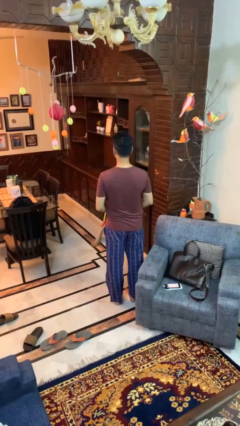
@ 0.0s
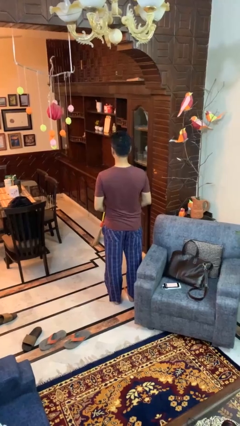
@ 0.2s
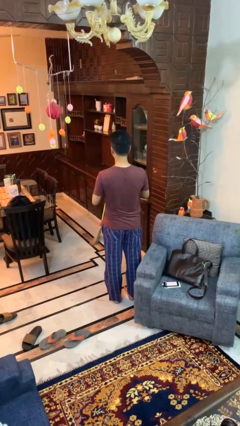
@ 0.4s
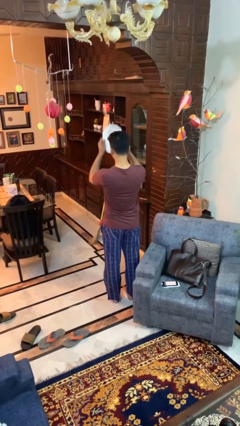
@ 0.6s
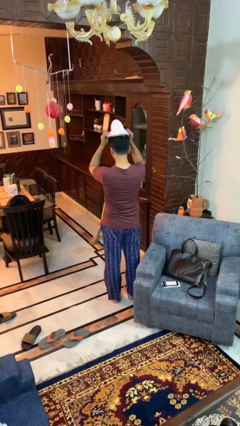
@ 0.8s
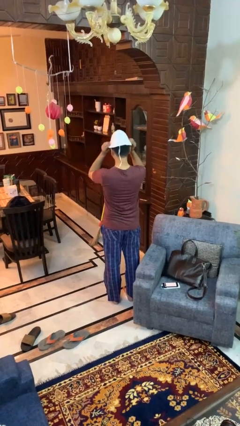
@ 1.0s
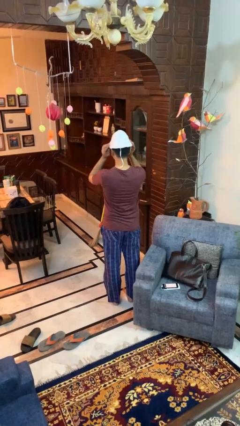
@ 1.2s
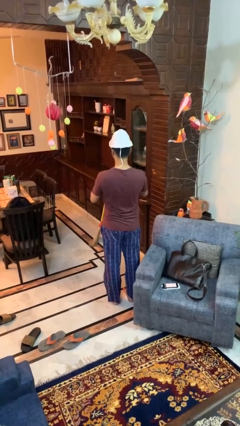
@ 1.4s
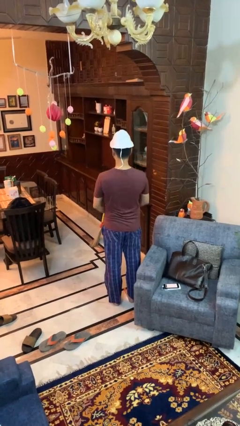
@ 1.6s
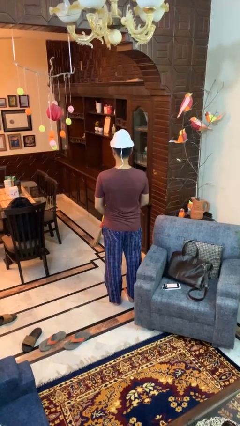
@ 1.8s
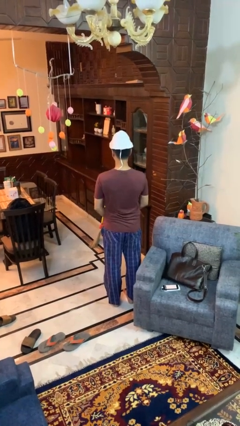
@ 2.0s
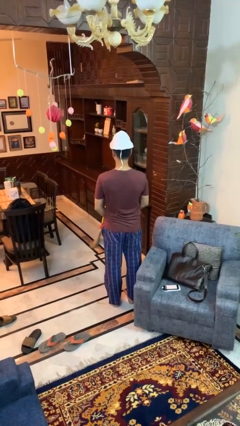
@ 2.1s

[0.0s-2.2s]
person puts on hat

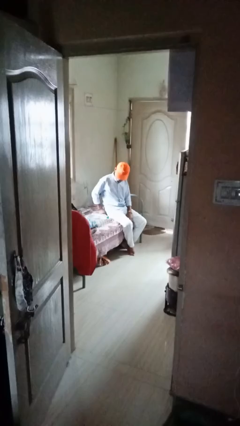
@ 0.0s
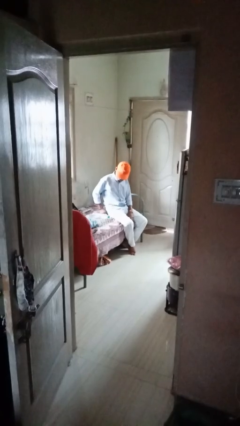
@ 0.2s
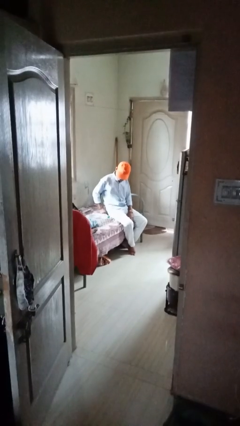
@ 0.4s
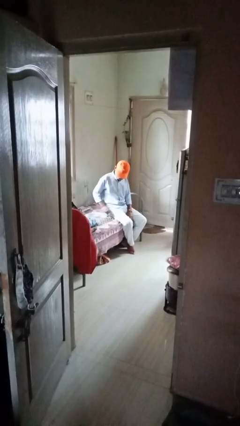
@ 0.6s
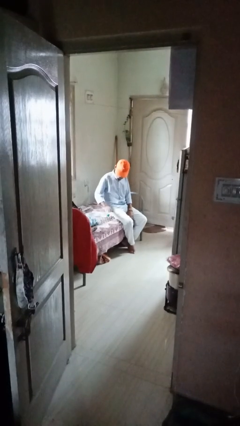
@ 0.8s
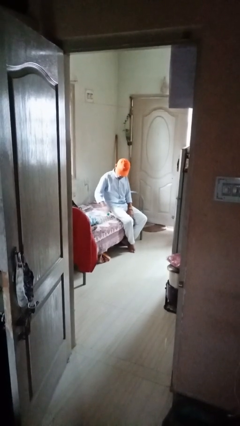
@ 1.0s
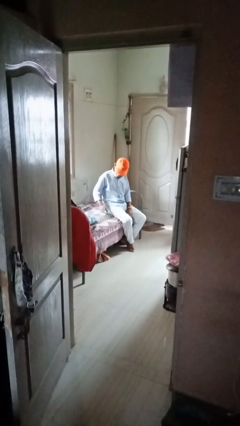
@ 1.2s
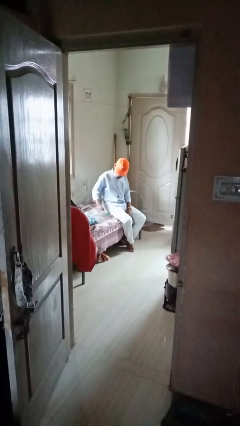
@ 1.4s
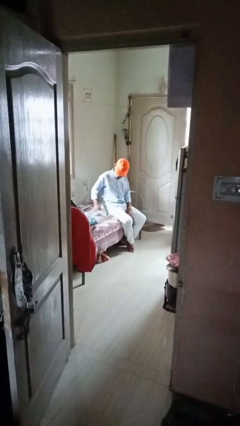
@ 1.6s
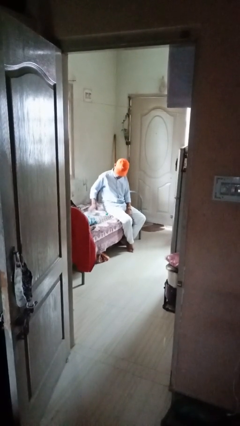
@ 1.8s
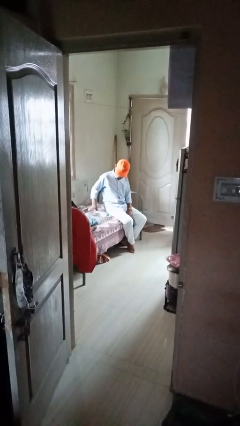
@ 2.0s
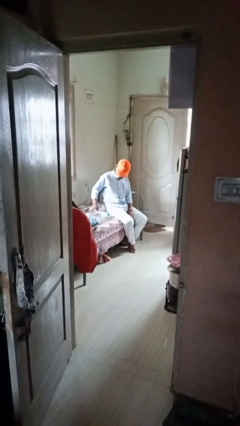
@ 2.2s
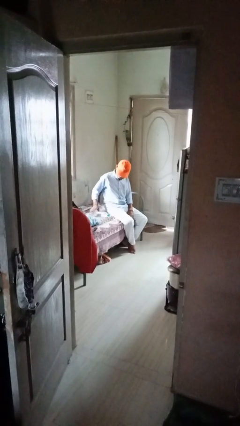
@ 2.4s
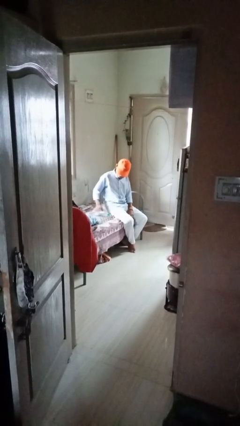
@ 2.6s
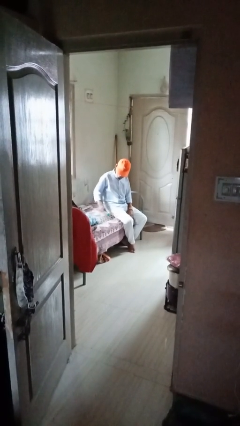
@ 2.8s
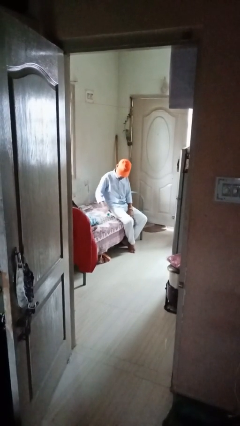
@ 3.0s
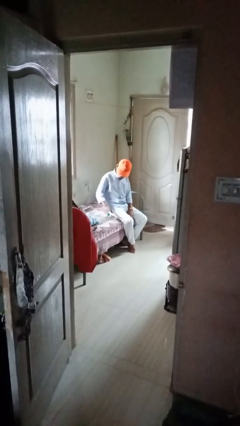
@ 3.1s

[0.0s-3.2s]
person waves hand over object

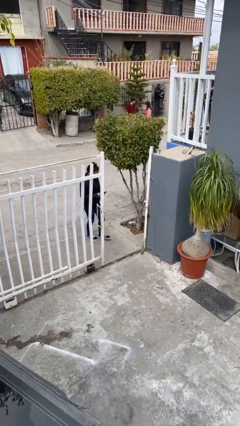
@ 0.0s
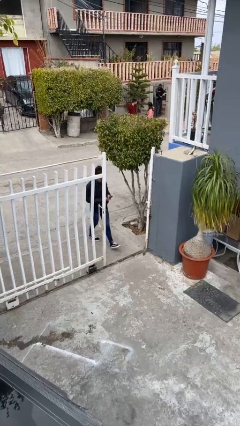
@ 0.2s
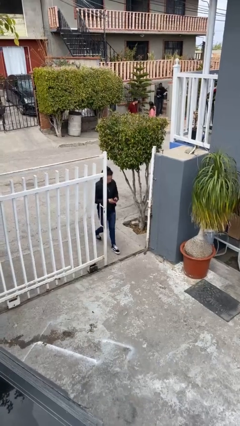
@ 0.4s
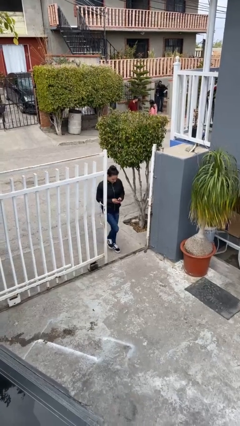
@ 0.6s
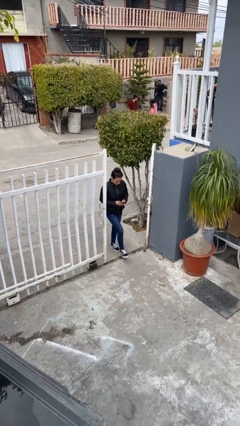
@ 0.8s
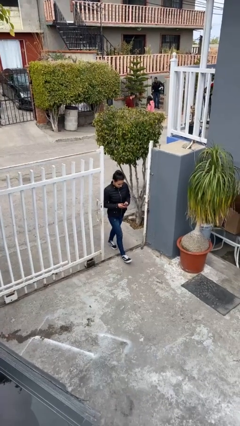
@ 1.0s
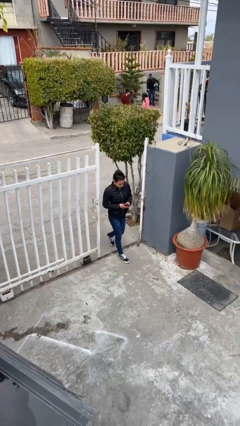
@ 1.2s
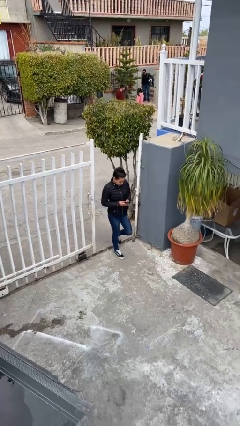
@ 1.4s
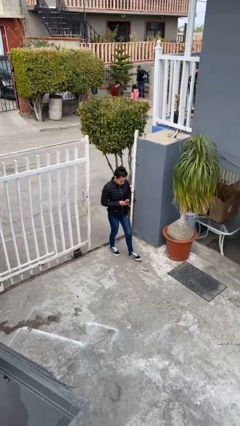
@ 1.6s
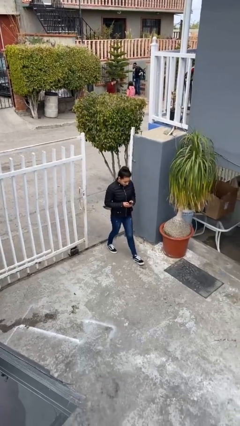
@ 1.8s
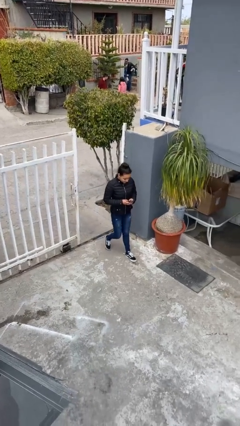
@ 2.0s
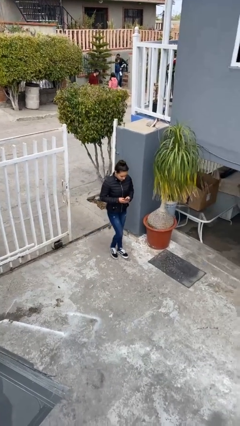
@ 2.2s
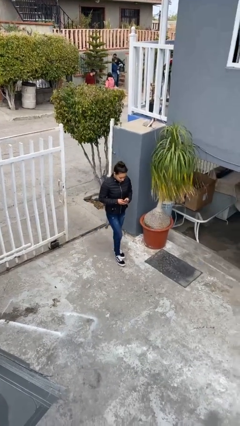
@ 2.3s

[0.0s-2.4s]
person enters scene through structure

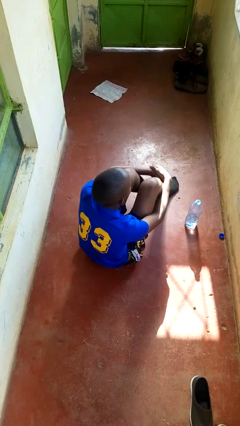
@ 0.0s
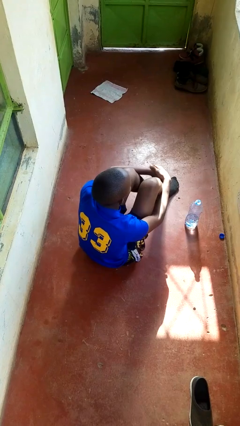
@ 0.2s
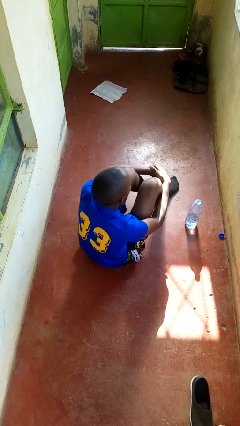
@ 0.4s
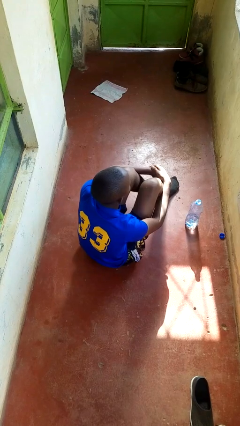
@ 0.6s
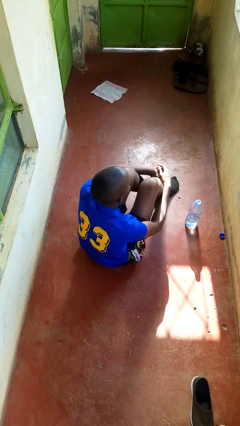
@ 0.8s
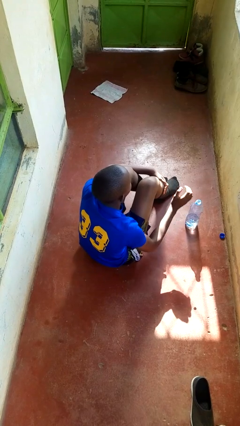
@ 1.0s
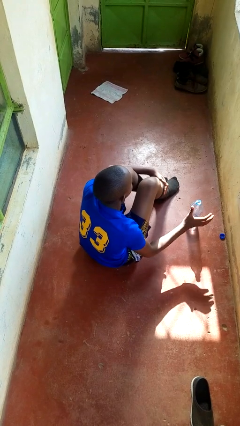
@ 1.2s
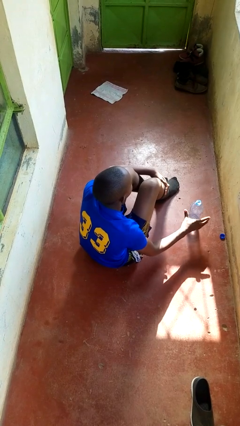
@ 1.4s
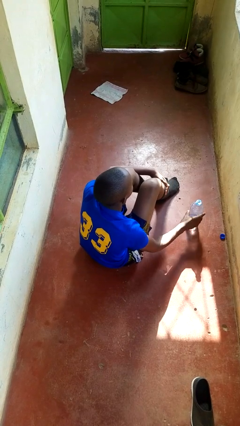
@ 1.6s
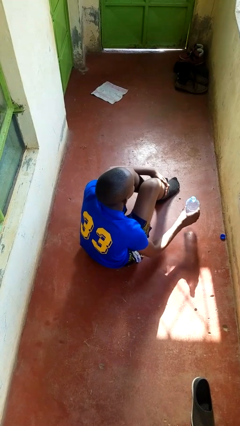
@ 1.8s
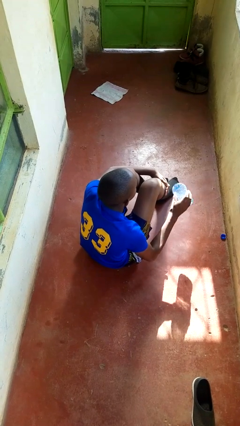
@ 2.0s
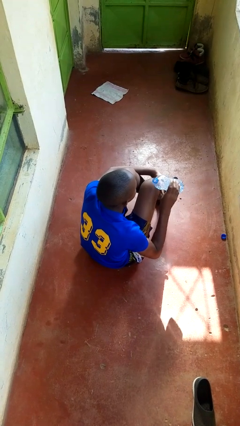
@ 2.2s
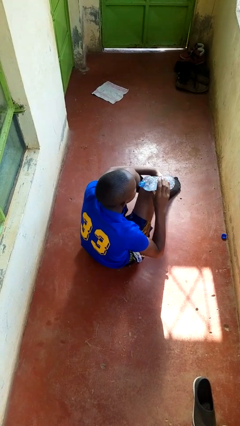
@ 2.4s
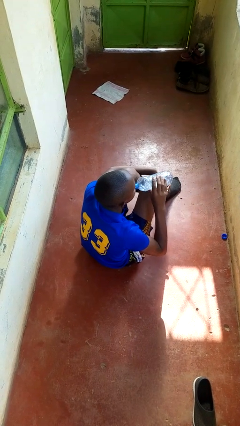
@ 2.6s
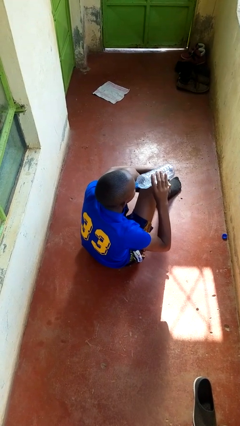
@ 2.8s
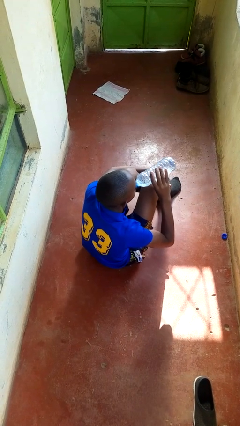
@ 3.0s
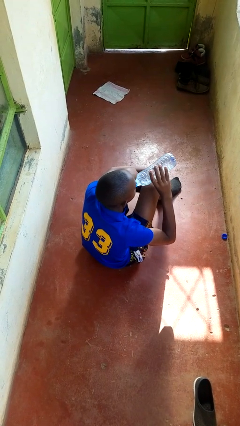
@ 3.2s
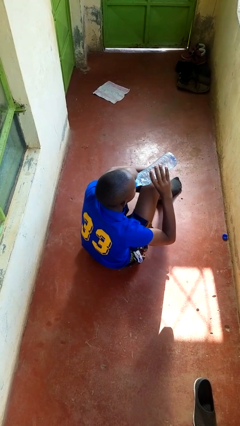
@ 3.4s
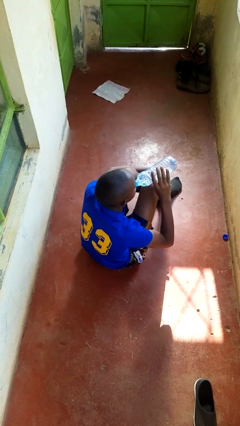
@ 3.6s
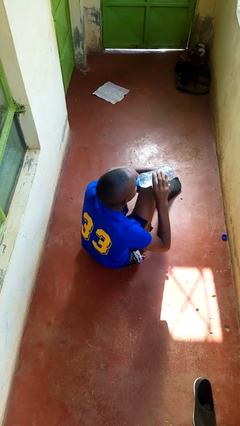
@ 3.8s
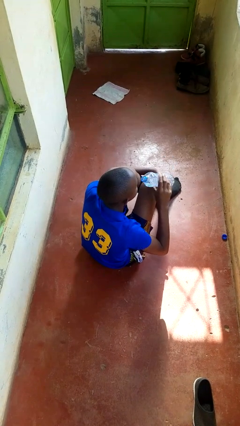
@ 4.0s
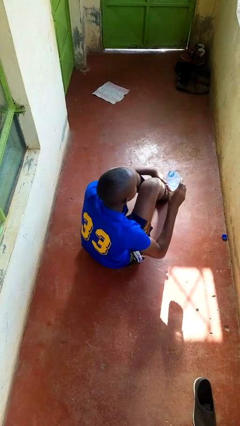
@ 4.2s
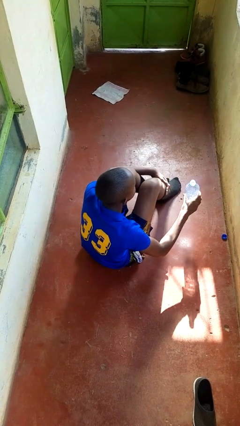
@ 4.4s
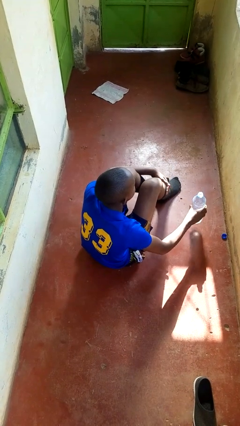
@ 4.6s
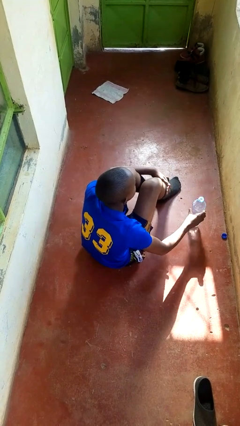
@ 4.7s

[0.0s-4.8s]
person drinks from bottle

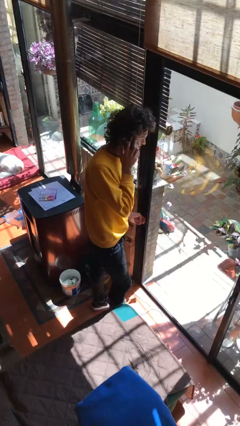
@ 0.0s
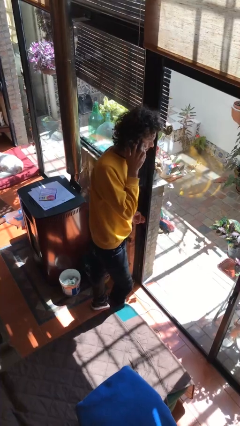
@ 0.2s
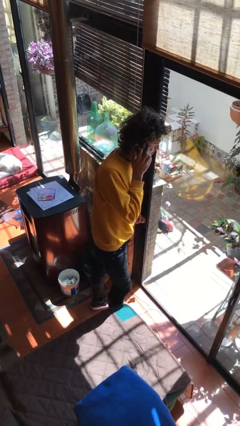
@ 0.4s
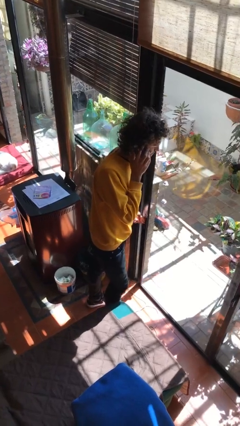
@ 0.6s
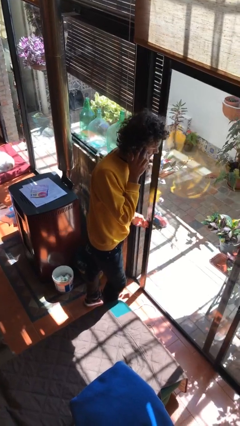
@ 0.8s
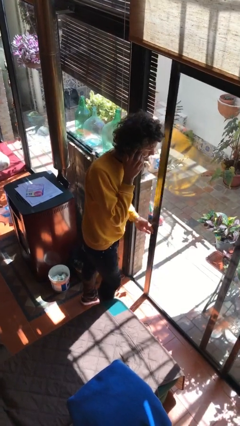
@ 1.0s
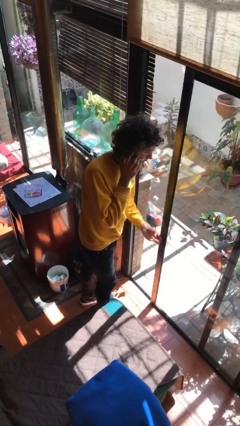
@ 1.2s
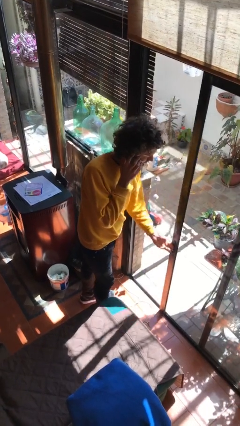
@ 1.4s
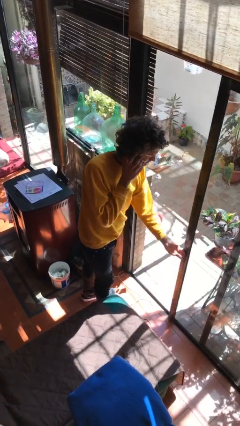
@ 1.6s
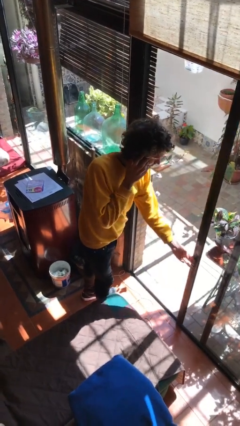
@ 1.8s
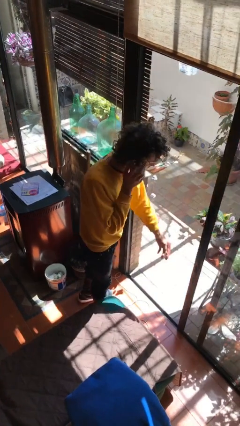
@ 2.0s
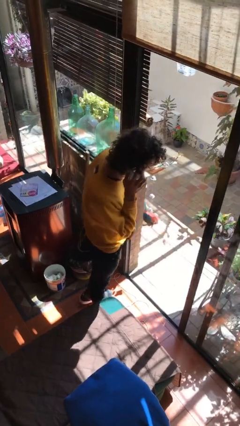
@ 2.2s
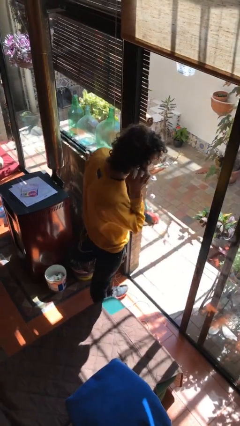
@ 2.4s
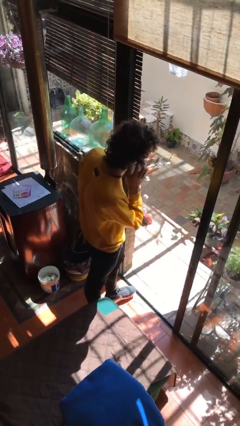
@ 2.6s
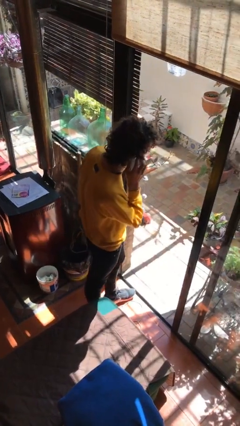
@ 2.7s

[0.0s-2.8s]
person opens facility door

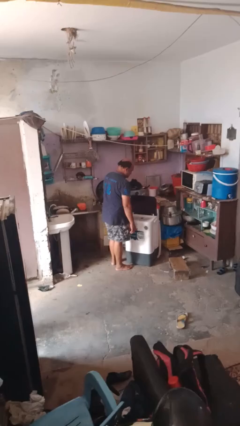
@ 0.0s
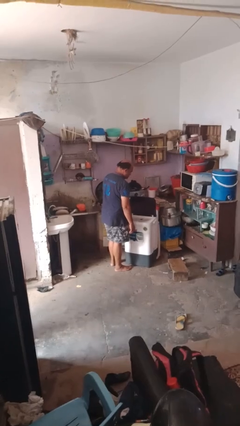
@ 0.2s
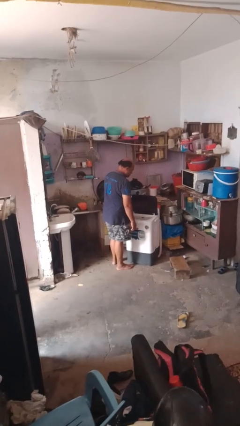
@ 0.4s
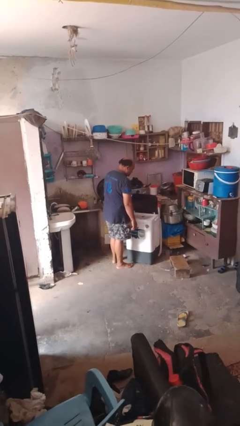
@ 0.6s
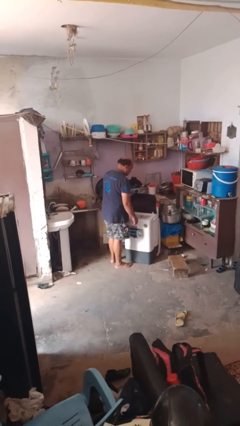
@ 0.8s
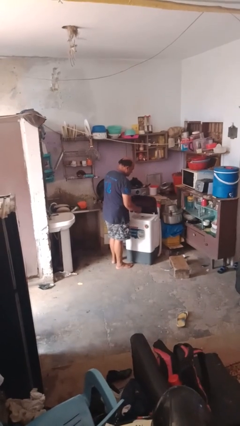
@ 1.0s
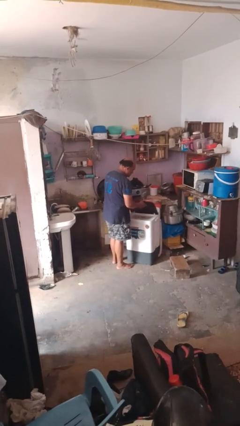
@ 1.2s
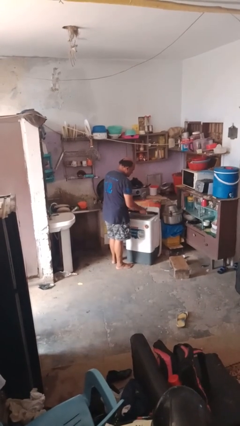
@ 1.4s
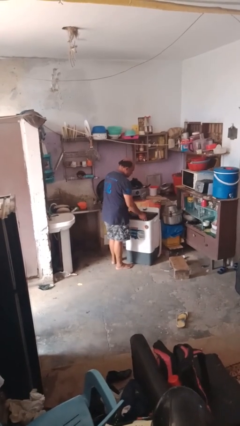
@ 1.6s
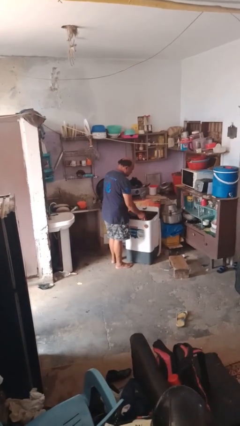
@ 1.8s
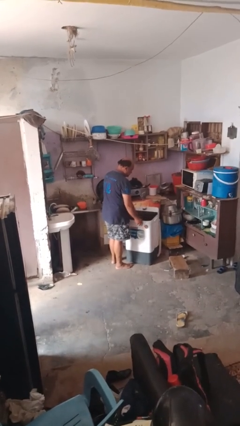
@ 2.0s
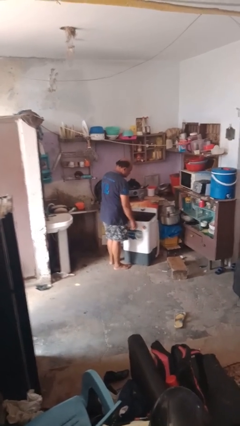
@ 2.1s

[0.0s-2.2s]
person closes clothes washer
